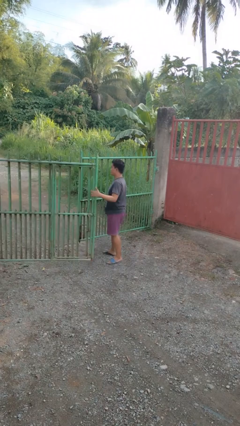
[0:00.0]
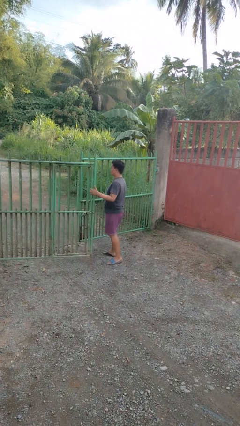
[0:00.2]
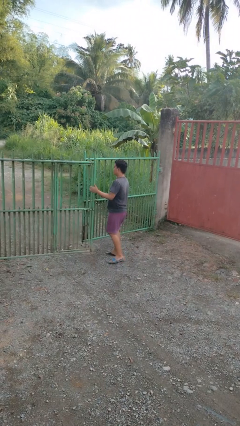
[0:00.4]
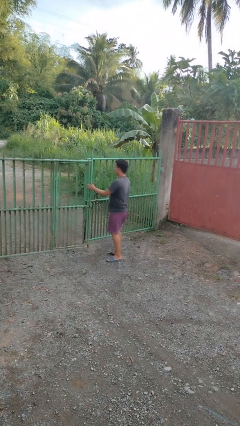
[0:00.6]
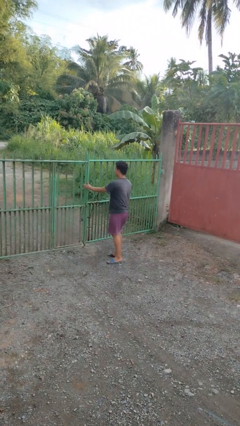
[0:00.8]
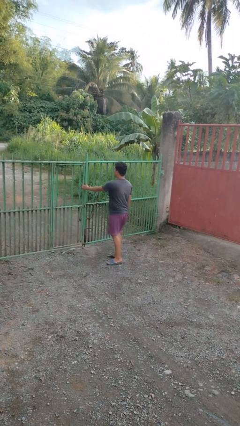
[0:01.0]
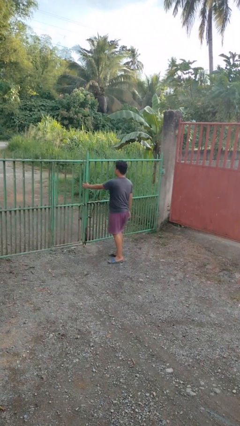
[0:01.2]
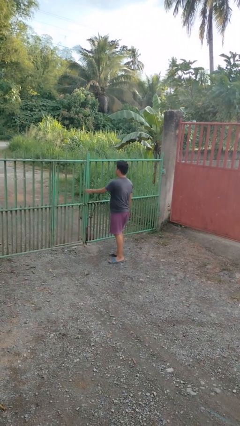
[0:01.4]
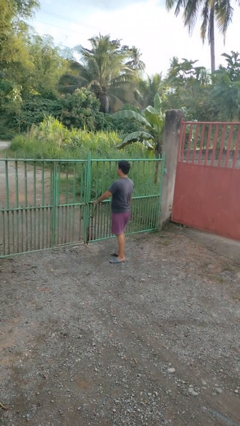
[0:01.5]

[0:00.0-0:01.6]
person closes gate

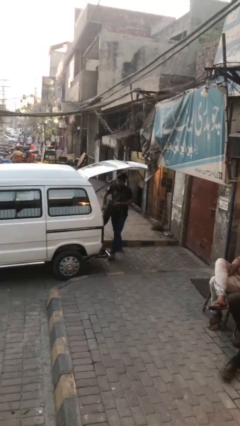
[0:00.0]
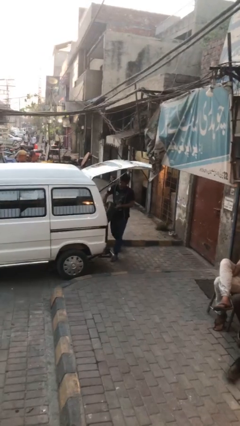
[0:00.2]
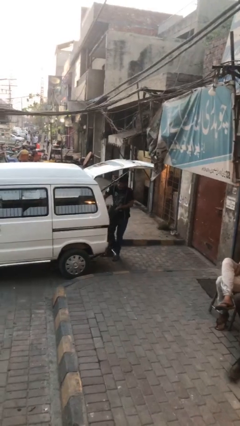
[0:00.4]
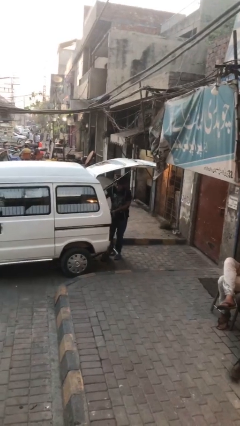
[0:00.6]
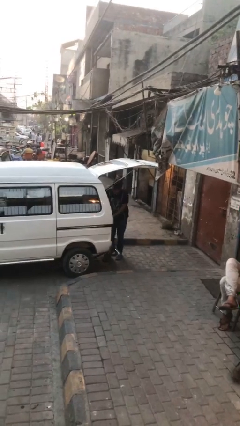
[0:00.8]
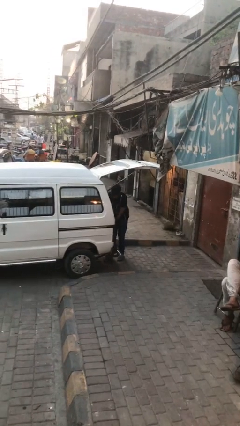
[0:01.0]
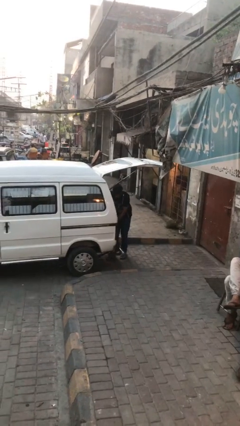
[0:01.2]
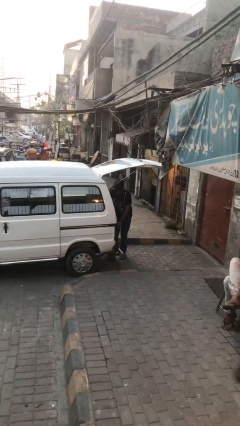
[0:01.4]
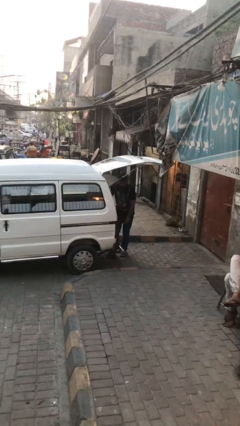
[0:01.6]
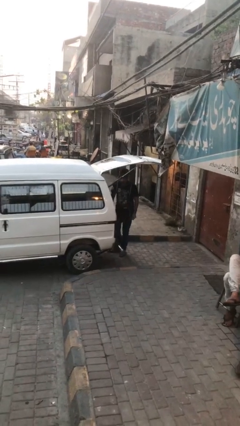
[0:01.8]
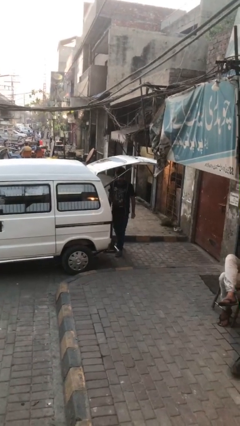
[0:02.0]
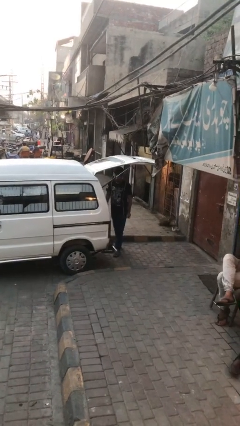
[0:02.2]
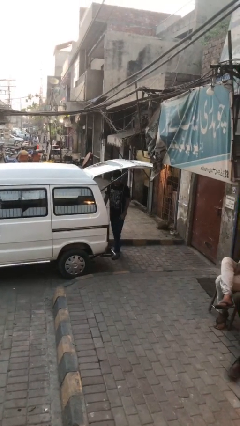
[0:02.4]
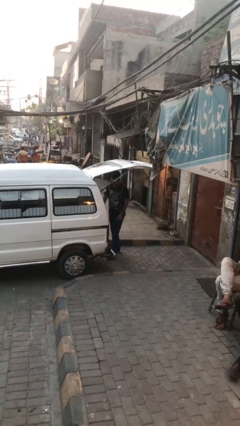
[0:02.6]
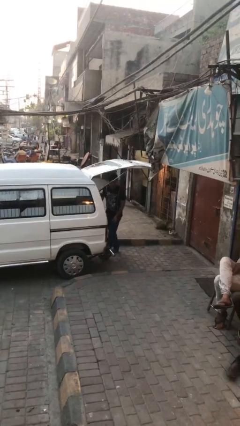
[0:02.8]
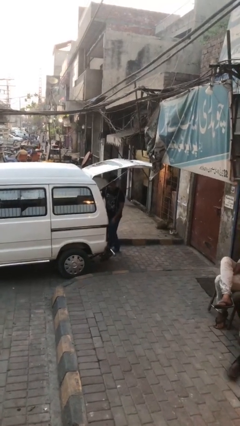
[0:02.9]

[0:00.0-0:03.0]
person loads car

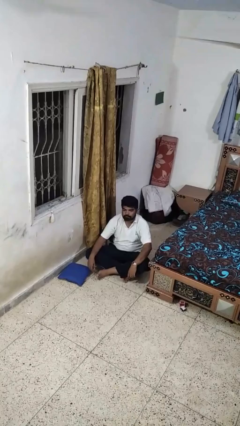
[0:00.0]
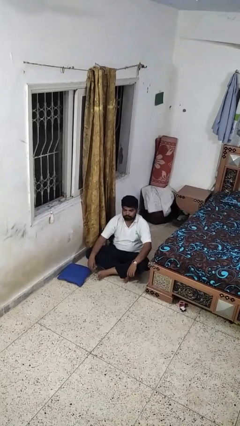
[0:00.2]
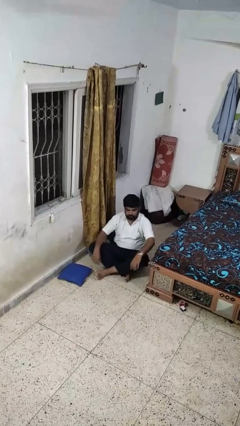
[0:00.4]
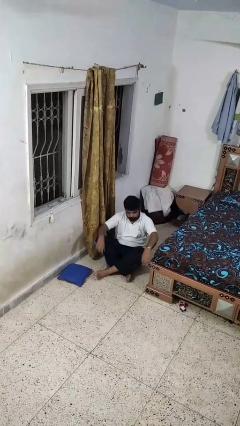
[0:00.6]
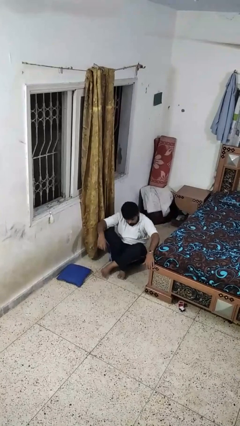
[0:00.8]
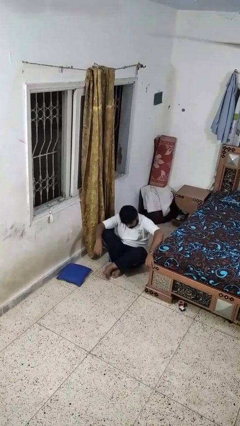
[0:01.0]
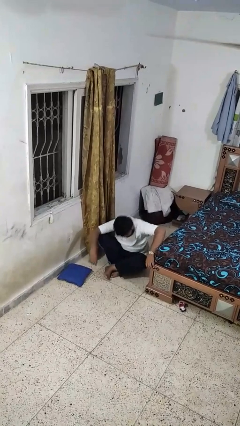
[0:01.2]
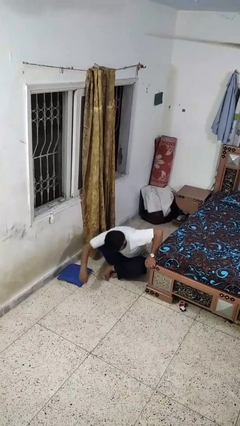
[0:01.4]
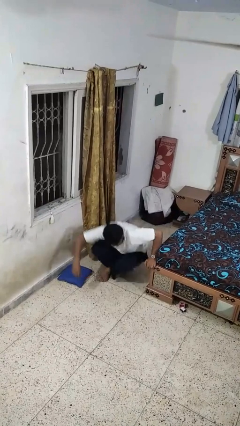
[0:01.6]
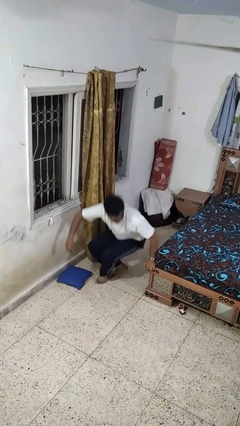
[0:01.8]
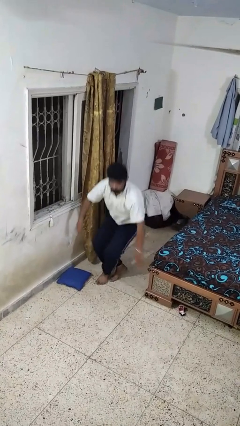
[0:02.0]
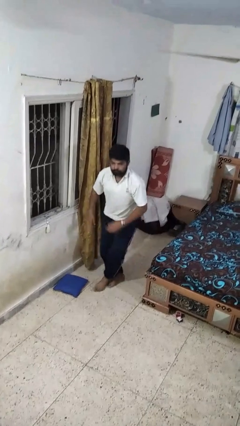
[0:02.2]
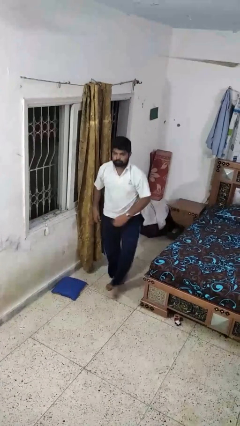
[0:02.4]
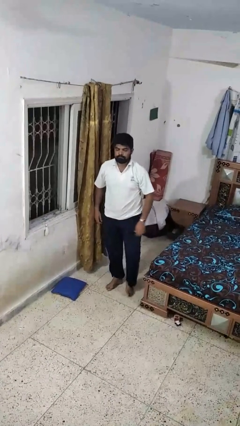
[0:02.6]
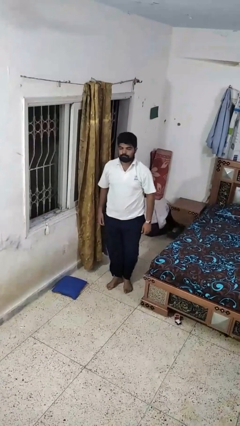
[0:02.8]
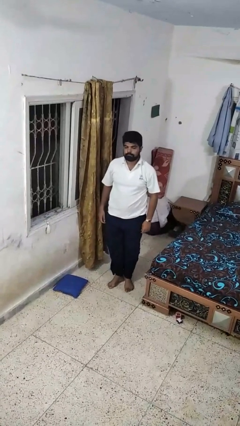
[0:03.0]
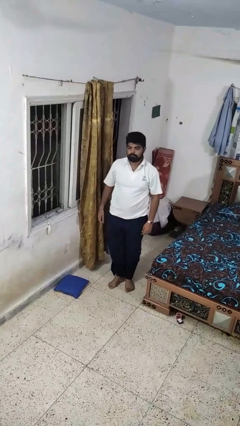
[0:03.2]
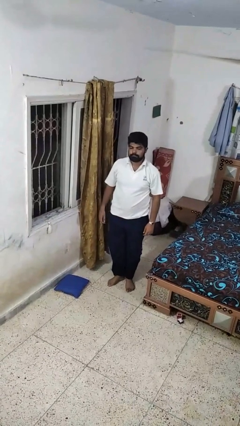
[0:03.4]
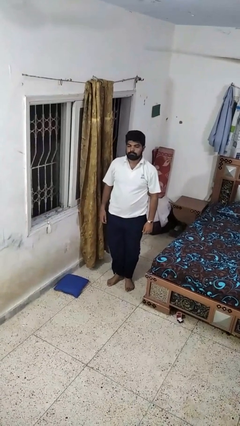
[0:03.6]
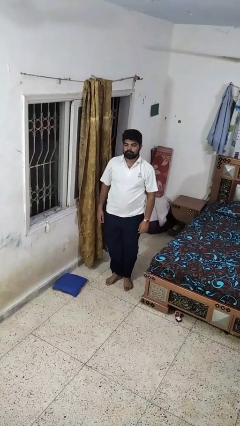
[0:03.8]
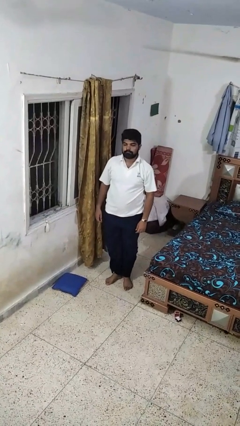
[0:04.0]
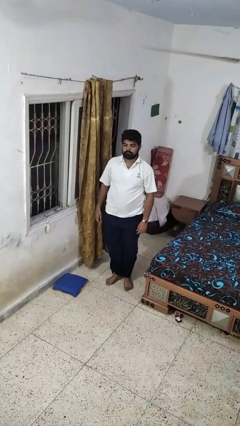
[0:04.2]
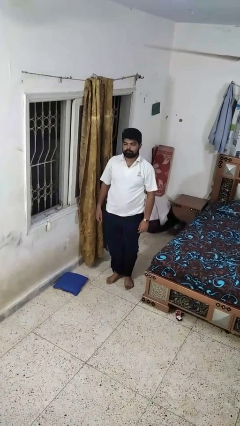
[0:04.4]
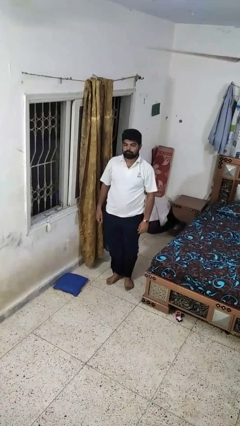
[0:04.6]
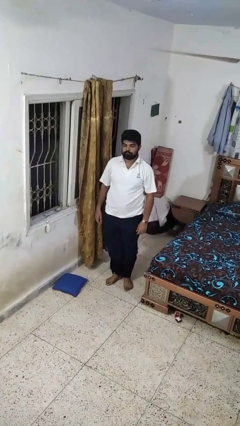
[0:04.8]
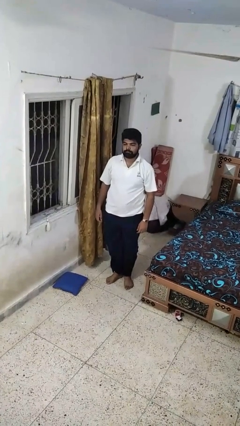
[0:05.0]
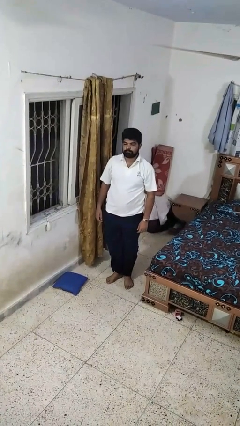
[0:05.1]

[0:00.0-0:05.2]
person stands up from floor

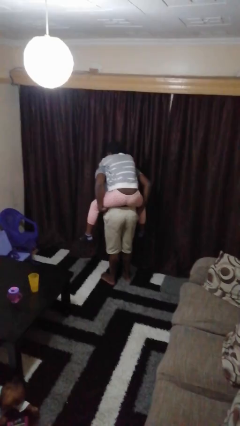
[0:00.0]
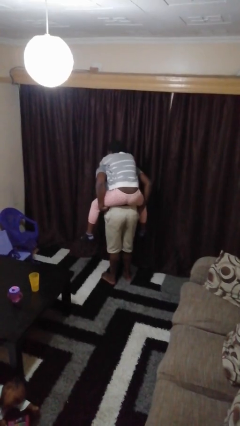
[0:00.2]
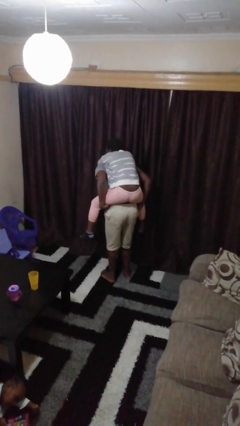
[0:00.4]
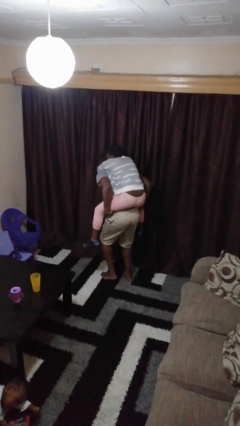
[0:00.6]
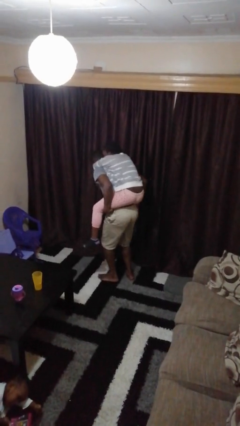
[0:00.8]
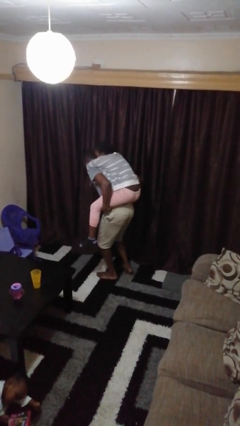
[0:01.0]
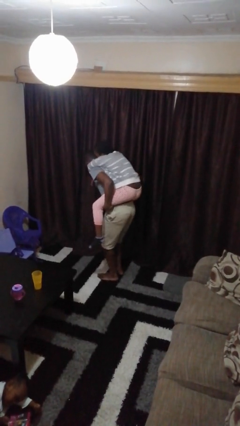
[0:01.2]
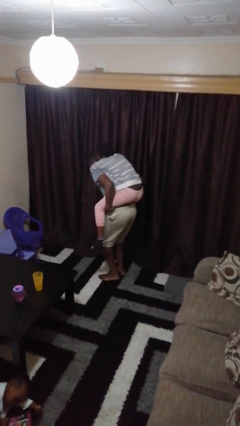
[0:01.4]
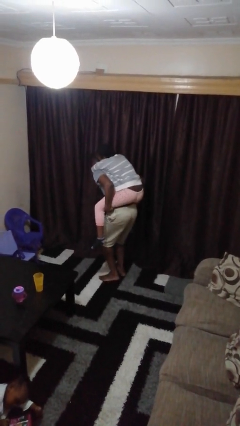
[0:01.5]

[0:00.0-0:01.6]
person carries person on back

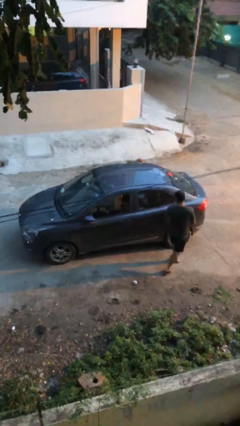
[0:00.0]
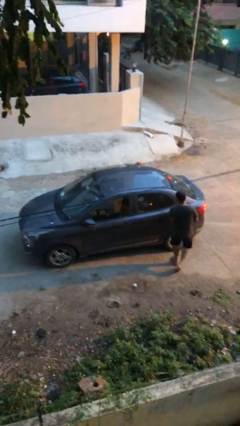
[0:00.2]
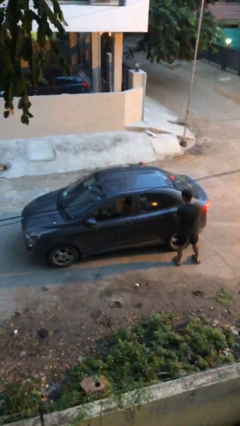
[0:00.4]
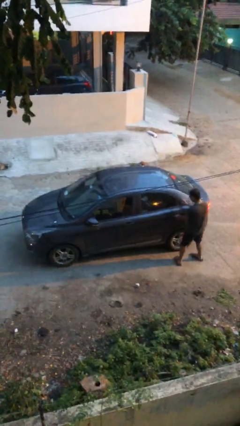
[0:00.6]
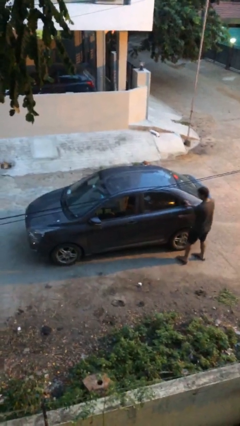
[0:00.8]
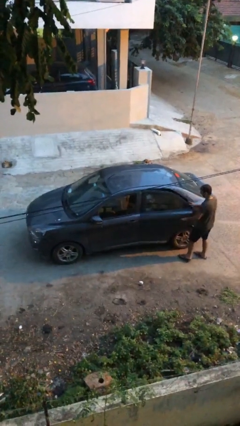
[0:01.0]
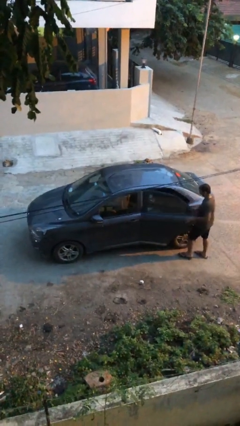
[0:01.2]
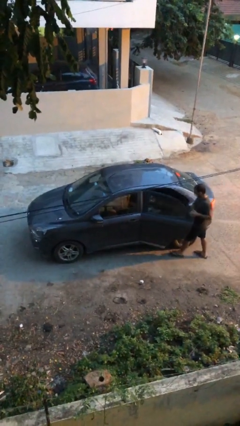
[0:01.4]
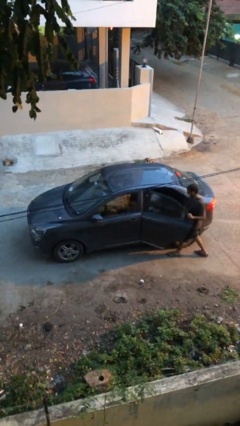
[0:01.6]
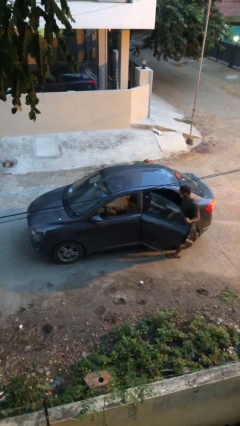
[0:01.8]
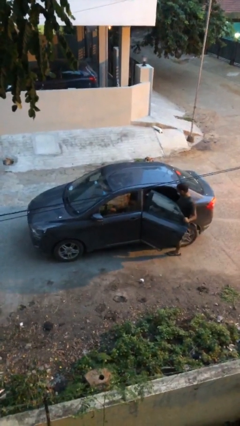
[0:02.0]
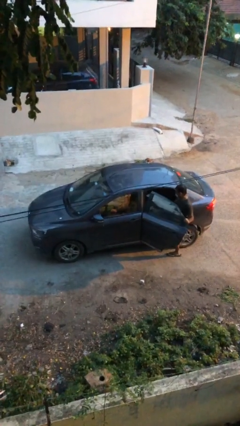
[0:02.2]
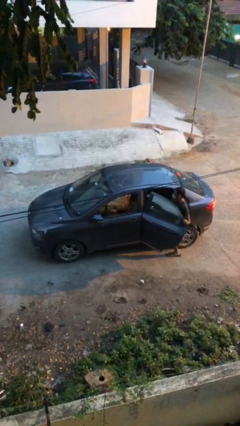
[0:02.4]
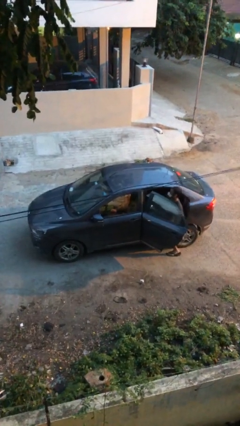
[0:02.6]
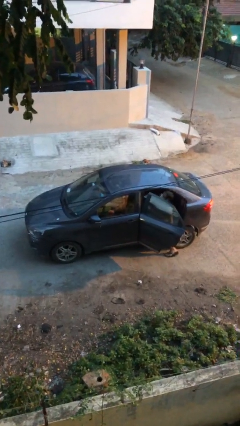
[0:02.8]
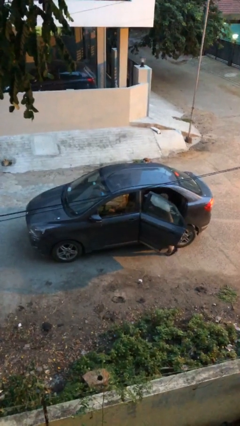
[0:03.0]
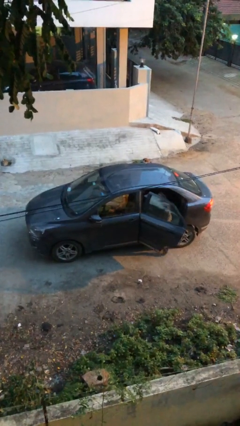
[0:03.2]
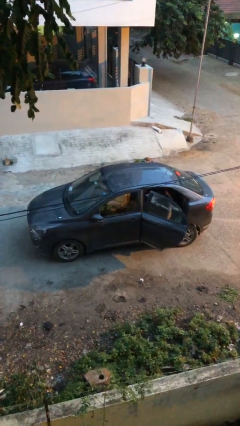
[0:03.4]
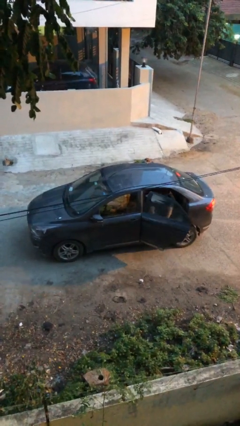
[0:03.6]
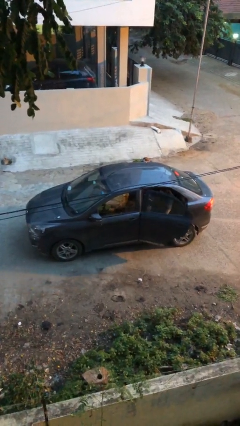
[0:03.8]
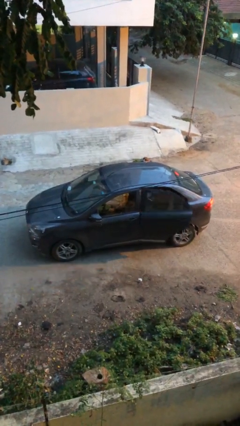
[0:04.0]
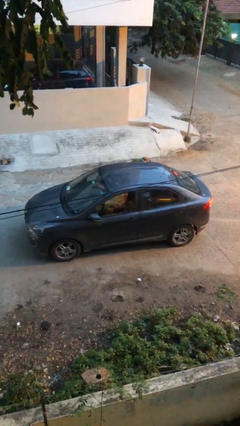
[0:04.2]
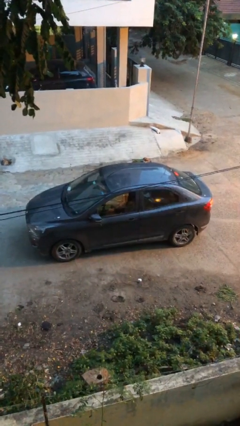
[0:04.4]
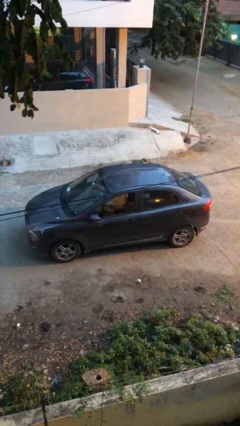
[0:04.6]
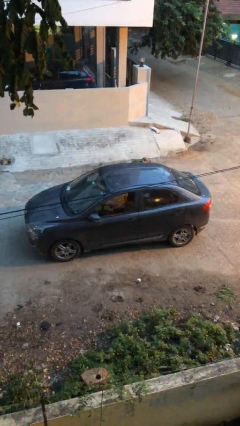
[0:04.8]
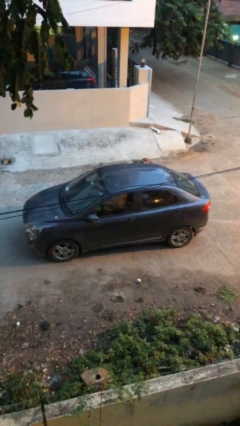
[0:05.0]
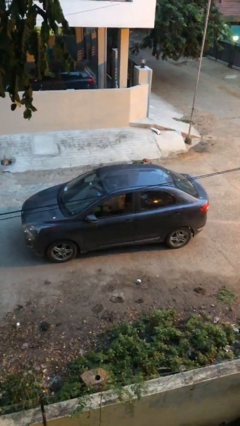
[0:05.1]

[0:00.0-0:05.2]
car picks up person

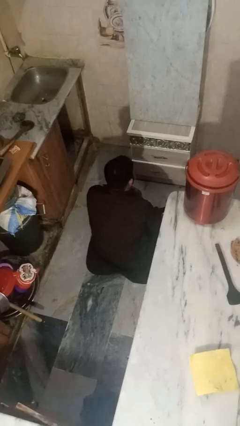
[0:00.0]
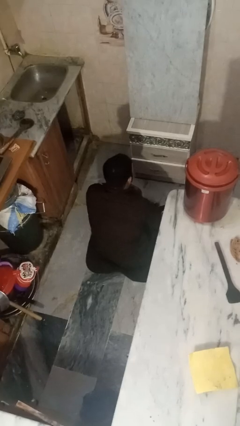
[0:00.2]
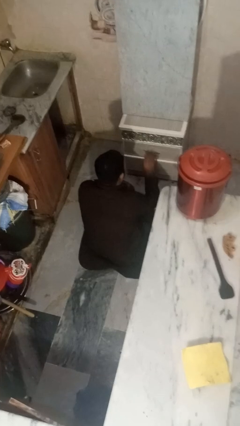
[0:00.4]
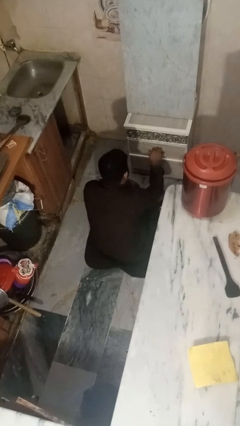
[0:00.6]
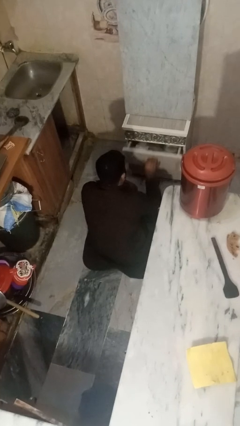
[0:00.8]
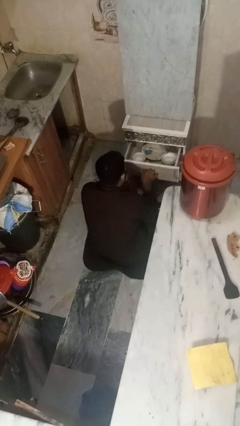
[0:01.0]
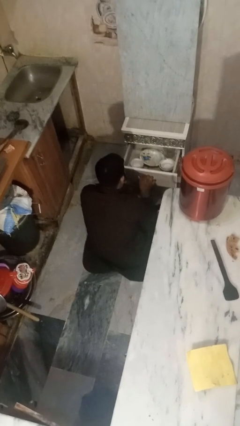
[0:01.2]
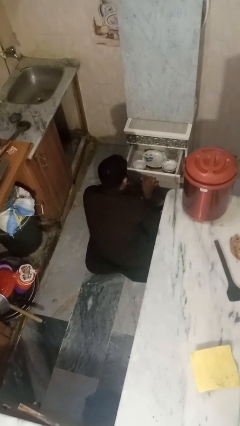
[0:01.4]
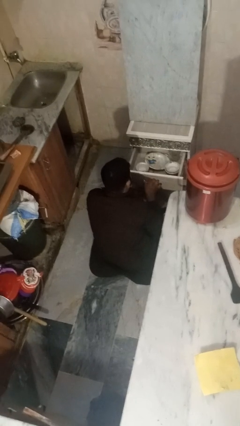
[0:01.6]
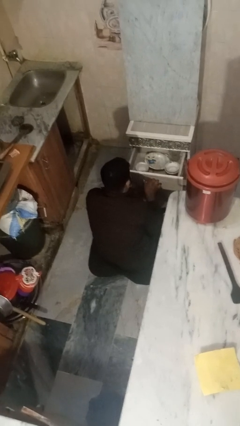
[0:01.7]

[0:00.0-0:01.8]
person opens kitchen drawer
